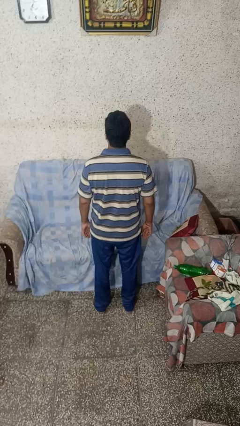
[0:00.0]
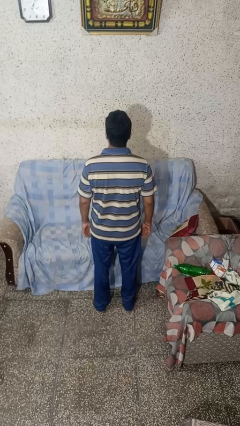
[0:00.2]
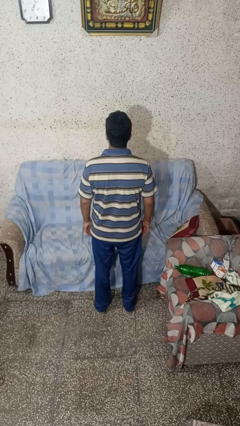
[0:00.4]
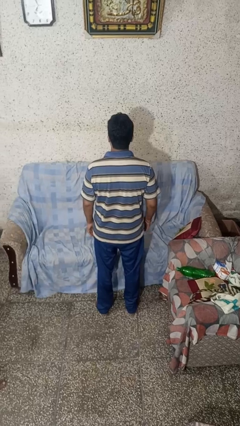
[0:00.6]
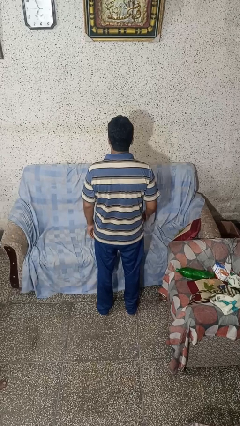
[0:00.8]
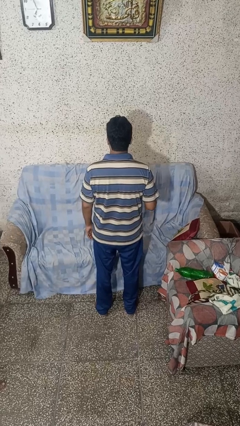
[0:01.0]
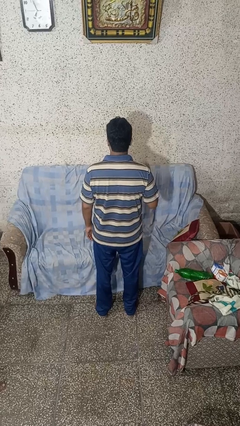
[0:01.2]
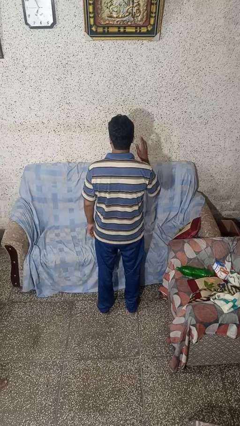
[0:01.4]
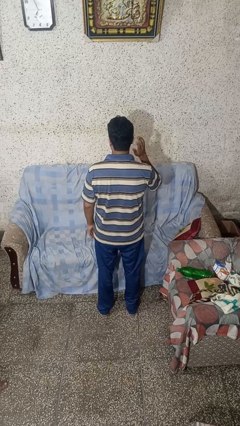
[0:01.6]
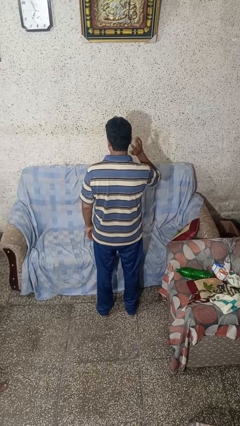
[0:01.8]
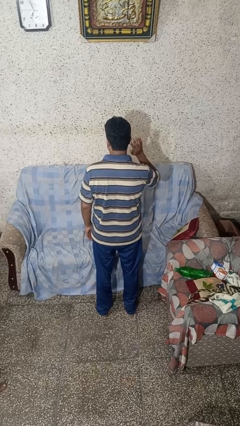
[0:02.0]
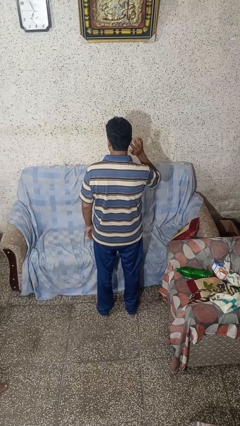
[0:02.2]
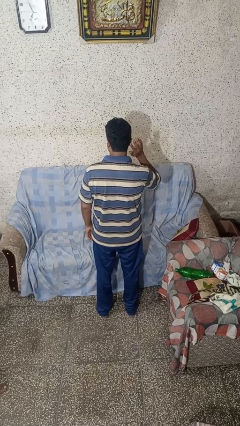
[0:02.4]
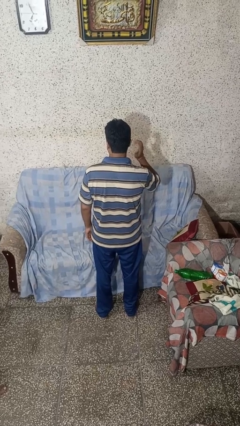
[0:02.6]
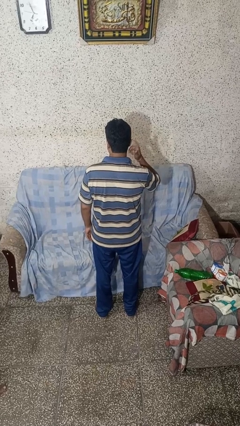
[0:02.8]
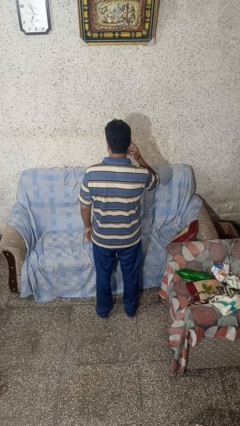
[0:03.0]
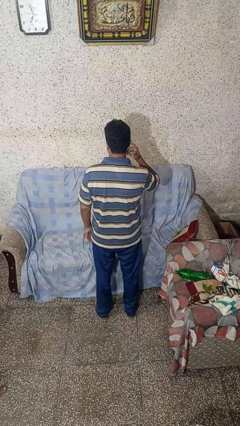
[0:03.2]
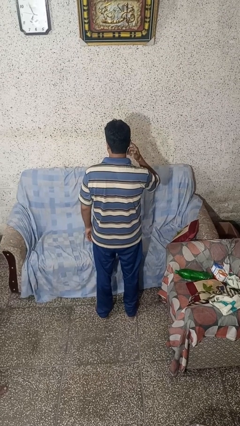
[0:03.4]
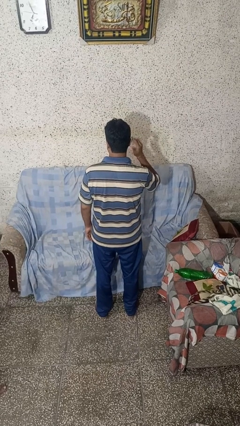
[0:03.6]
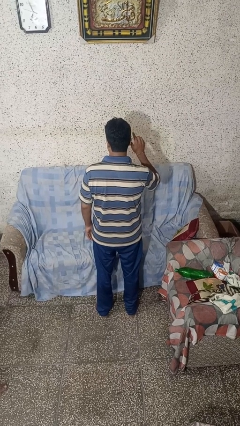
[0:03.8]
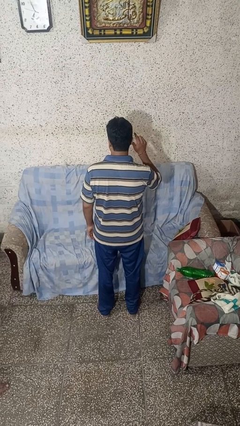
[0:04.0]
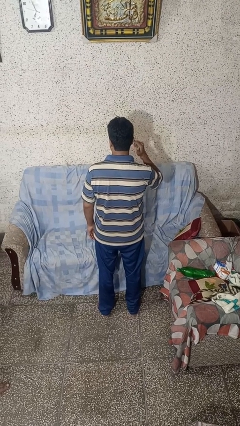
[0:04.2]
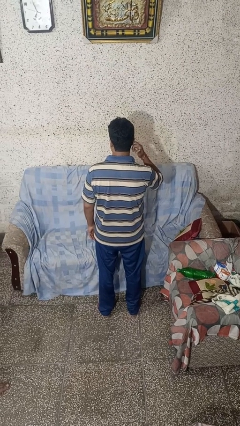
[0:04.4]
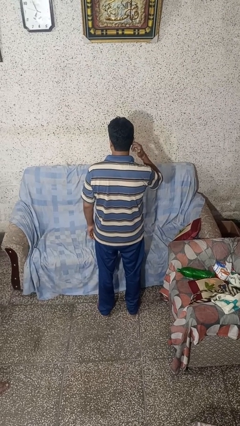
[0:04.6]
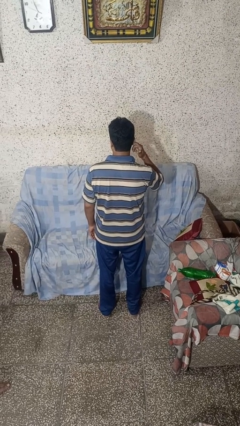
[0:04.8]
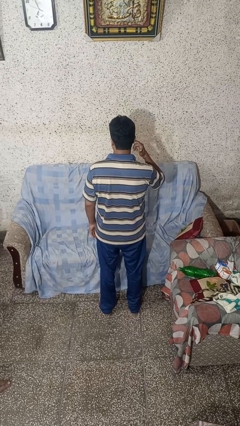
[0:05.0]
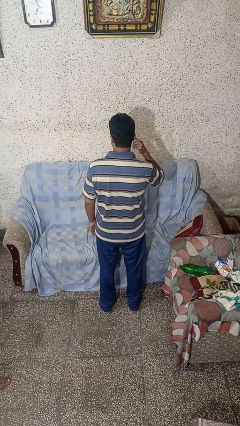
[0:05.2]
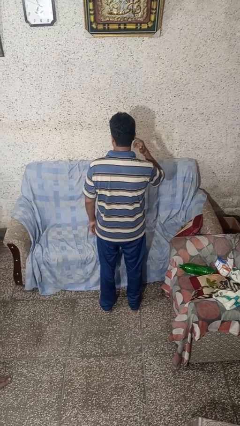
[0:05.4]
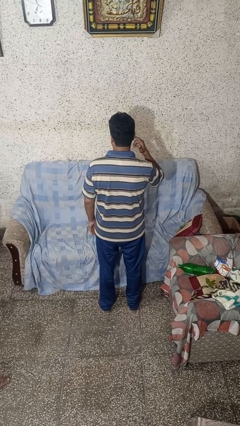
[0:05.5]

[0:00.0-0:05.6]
person gestures listen closely

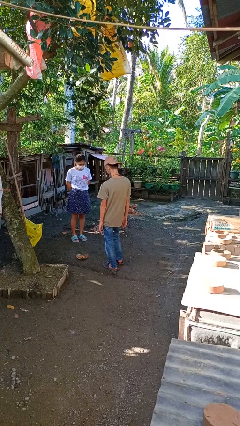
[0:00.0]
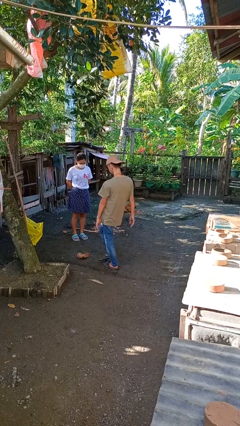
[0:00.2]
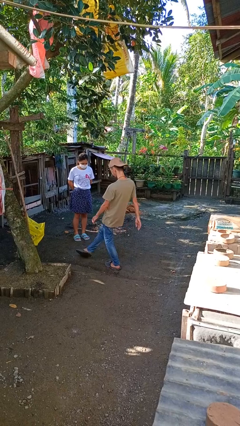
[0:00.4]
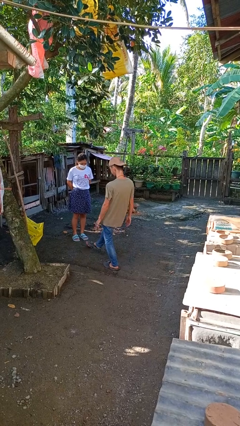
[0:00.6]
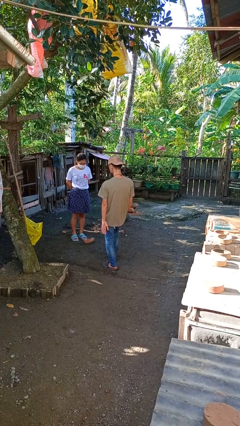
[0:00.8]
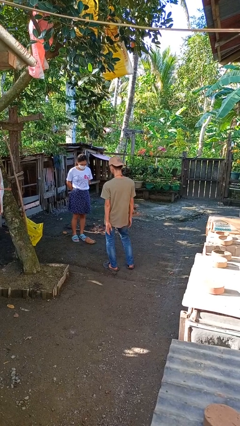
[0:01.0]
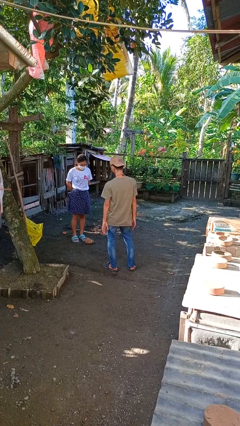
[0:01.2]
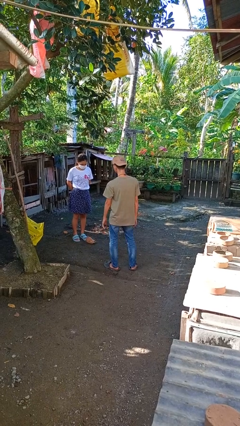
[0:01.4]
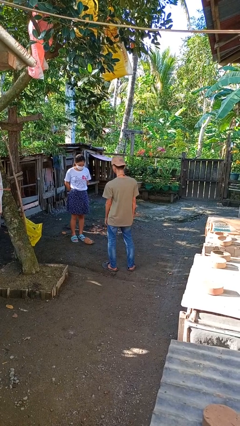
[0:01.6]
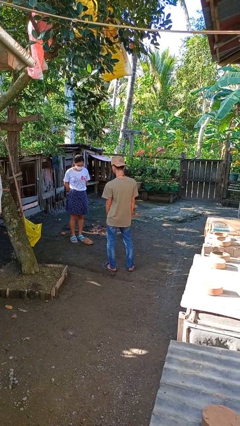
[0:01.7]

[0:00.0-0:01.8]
person kicks object to person

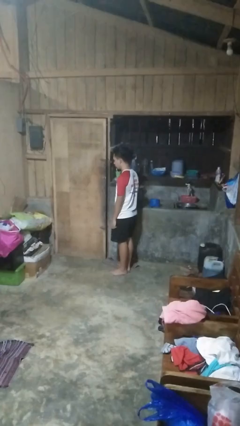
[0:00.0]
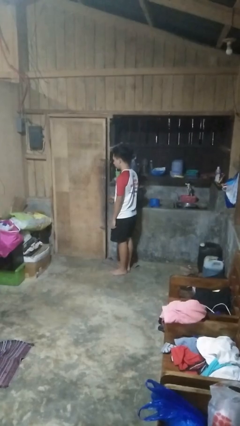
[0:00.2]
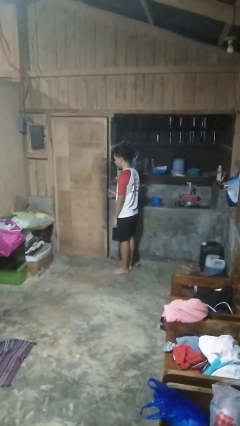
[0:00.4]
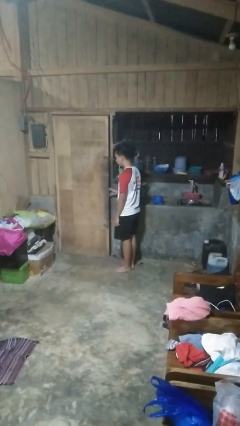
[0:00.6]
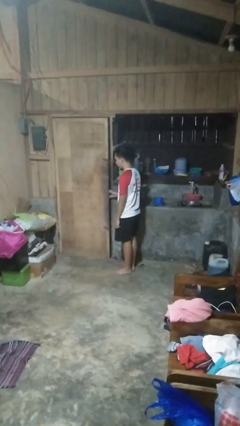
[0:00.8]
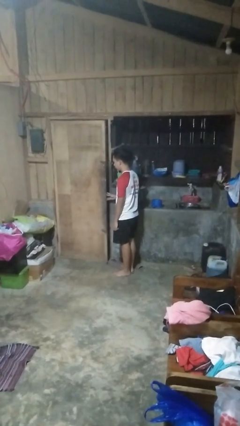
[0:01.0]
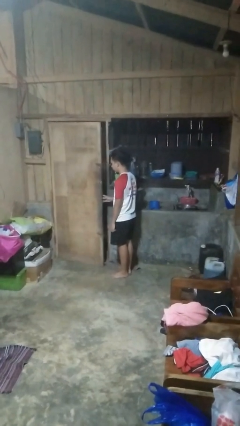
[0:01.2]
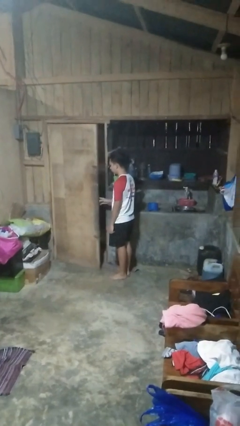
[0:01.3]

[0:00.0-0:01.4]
person opens facility door

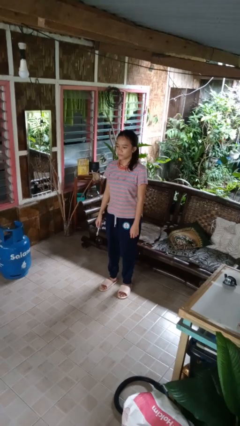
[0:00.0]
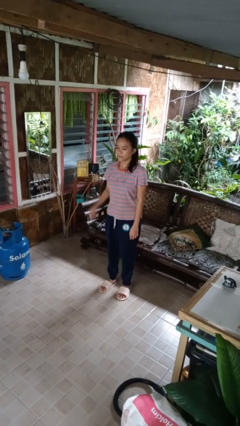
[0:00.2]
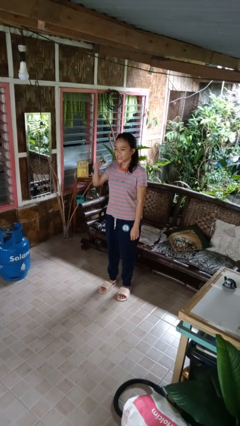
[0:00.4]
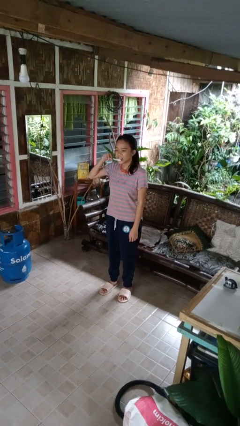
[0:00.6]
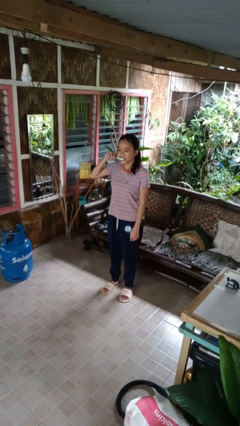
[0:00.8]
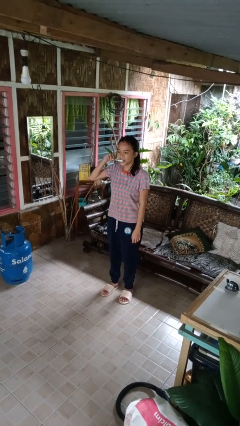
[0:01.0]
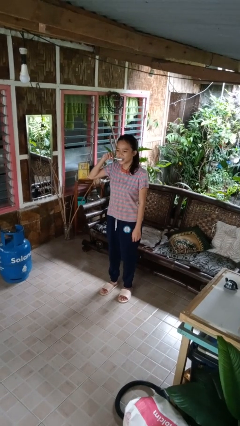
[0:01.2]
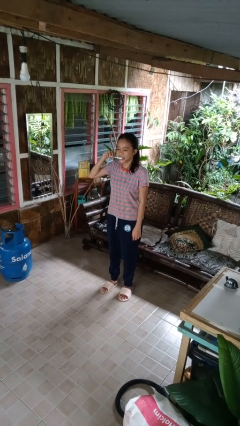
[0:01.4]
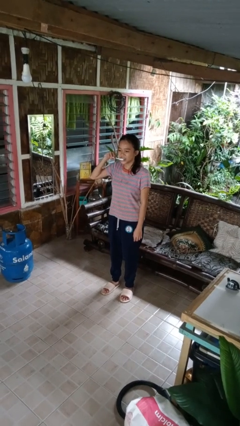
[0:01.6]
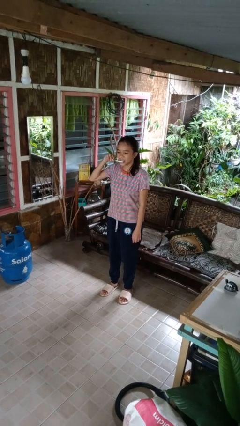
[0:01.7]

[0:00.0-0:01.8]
person brushes teeth

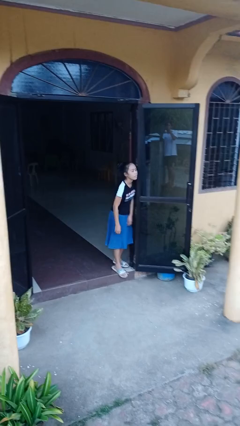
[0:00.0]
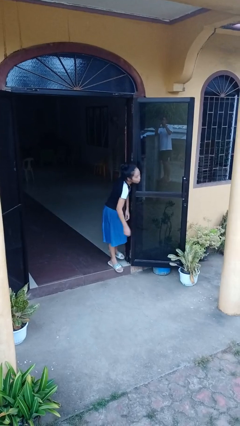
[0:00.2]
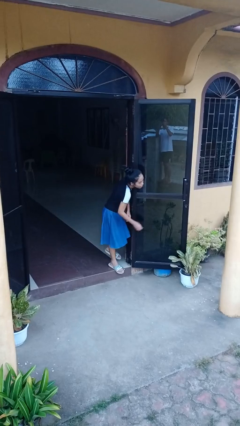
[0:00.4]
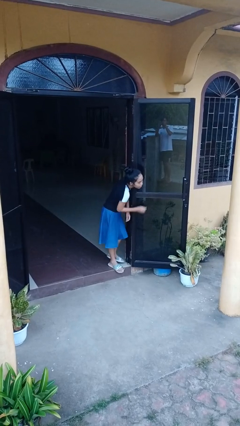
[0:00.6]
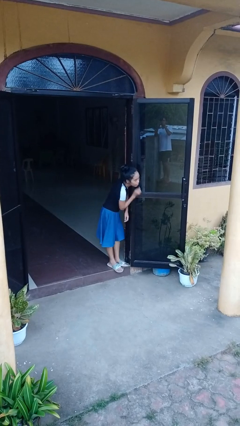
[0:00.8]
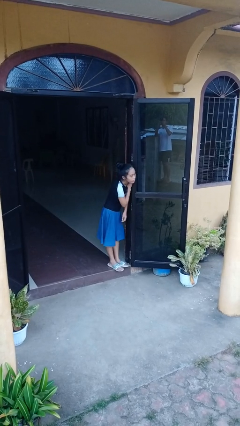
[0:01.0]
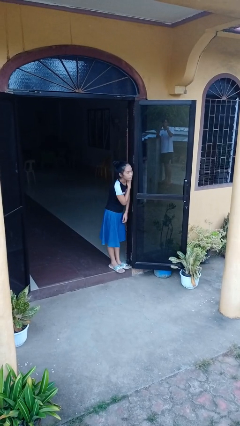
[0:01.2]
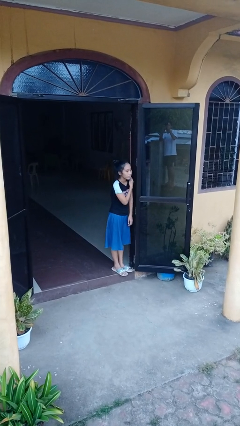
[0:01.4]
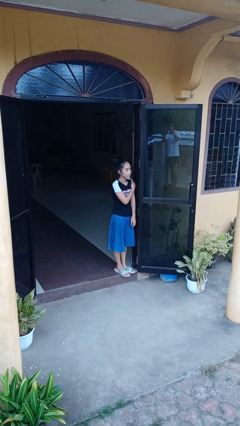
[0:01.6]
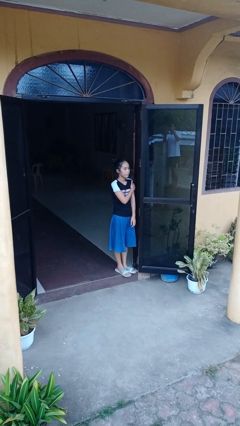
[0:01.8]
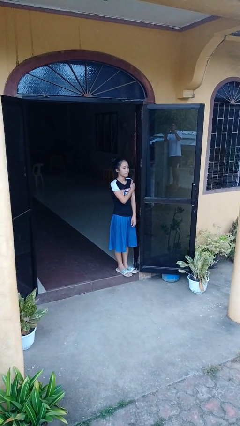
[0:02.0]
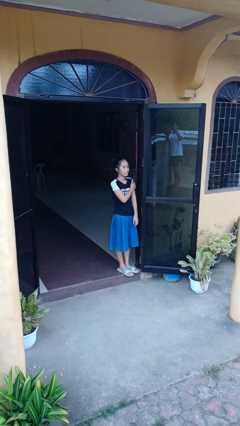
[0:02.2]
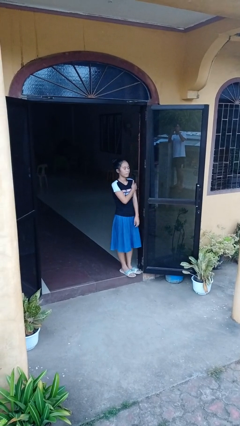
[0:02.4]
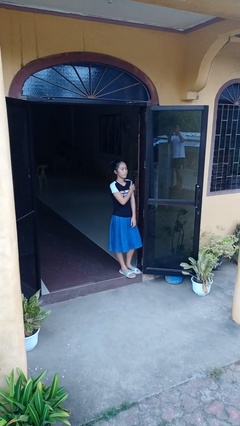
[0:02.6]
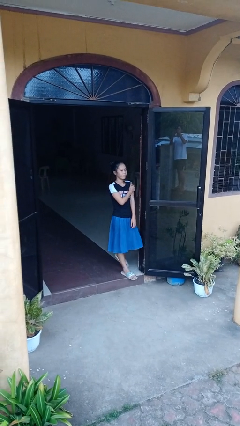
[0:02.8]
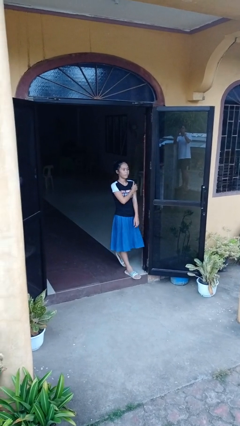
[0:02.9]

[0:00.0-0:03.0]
person bumps into wall

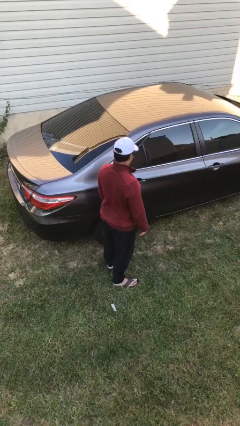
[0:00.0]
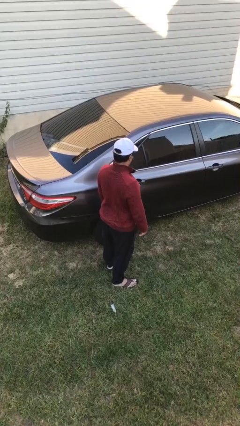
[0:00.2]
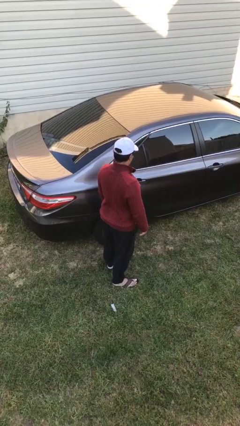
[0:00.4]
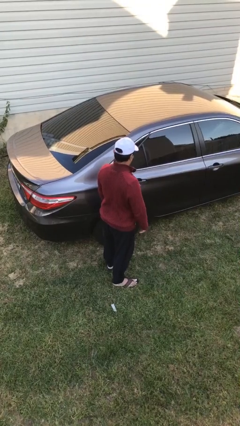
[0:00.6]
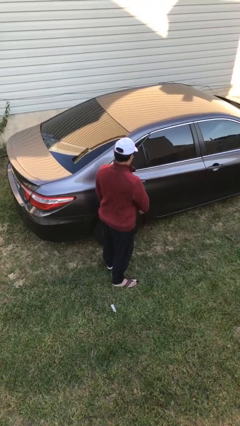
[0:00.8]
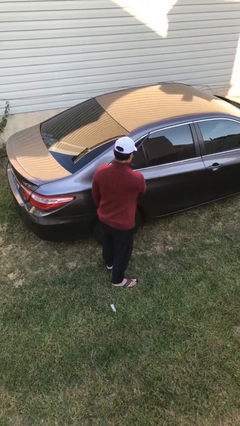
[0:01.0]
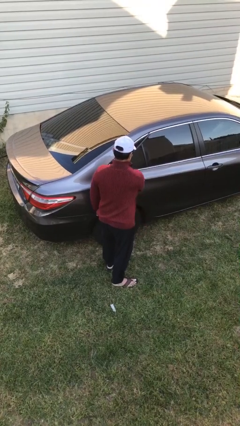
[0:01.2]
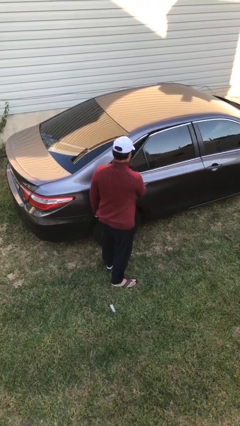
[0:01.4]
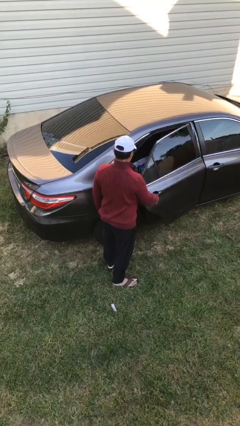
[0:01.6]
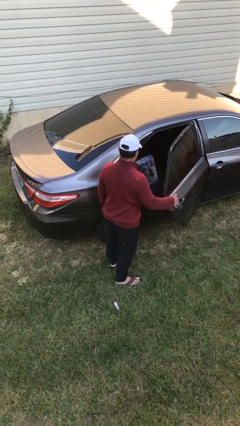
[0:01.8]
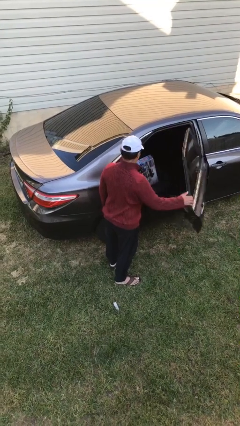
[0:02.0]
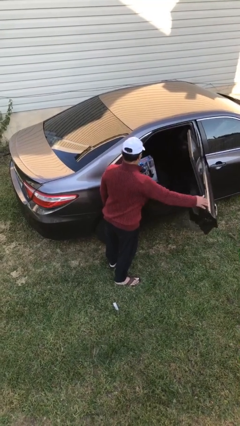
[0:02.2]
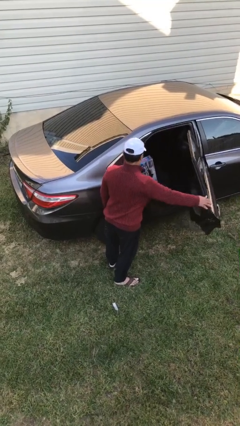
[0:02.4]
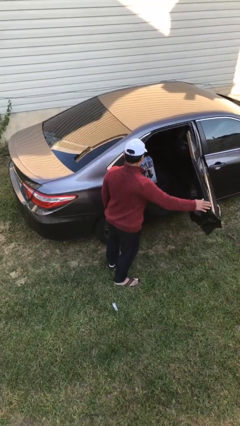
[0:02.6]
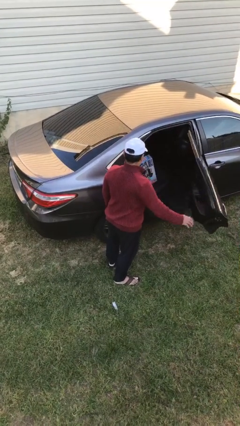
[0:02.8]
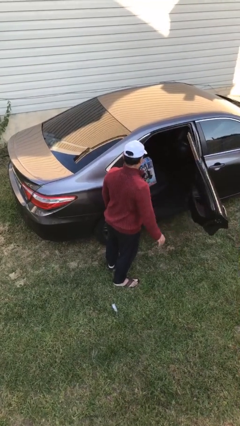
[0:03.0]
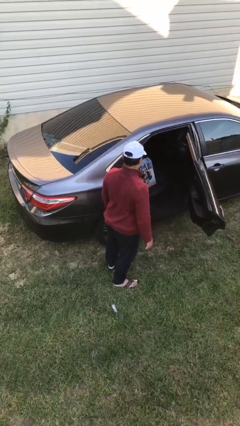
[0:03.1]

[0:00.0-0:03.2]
person opens car door

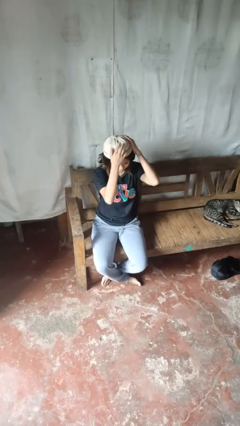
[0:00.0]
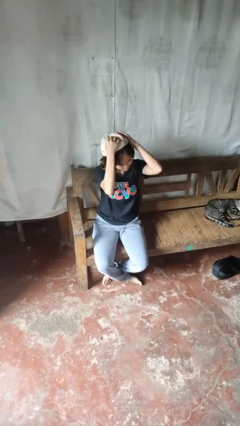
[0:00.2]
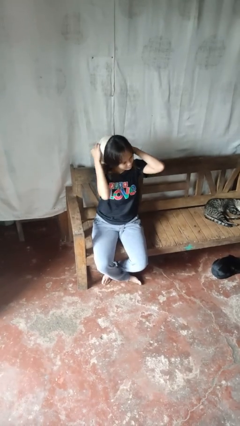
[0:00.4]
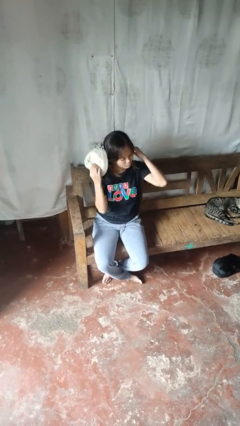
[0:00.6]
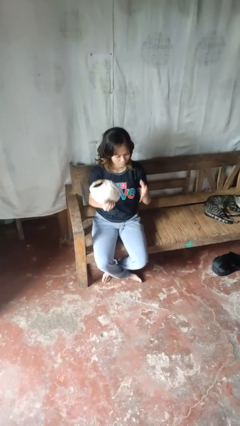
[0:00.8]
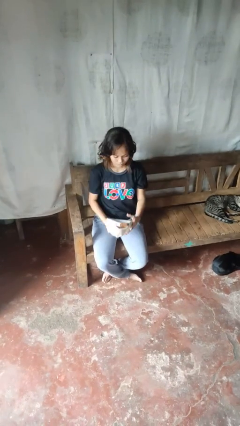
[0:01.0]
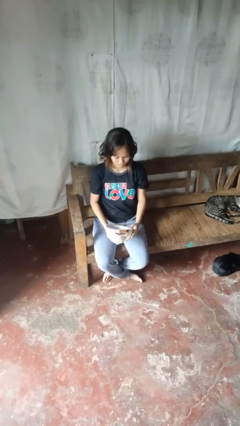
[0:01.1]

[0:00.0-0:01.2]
person takes off hat
